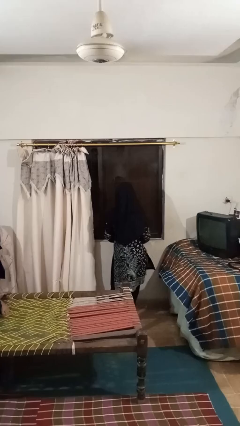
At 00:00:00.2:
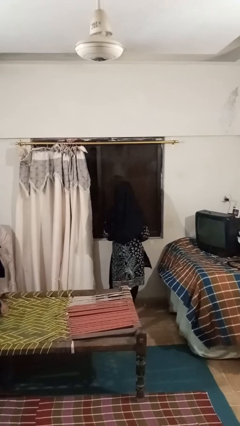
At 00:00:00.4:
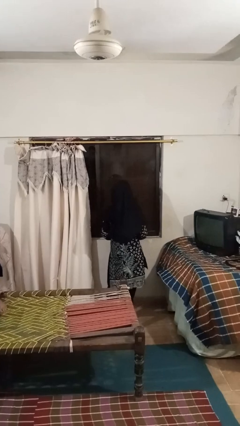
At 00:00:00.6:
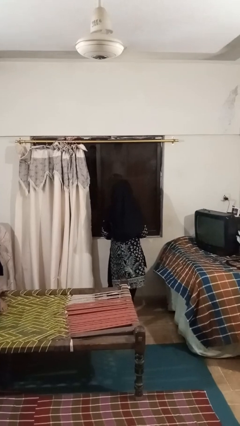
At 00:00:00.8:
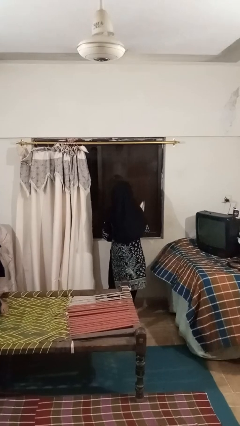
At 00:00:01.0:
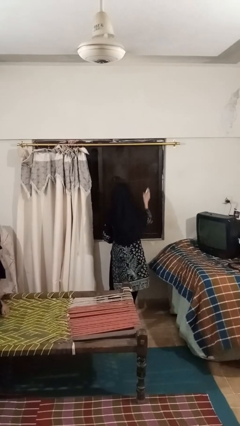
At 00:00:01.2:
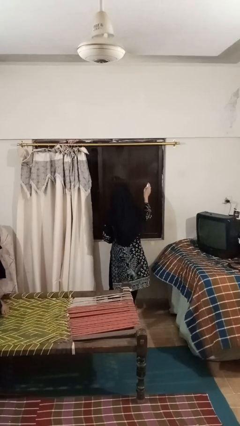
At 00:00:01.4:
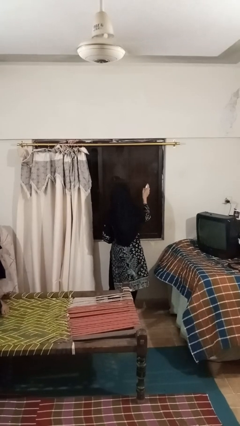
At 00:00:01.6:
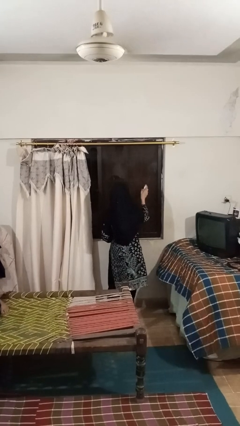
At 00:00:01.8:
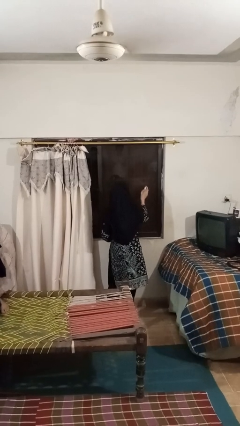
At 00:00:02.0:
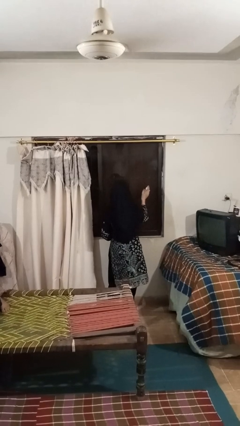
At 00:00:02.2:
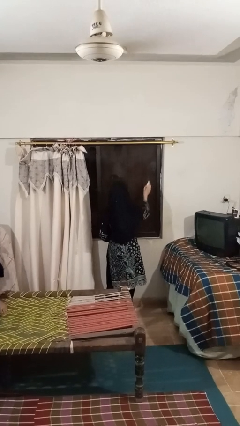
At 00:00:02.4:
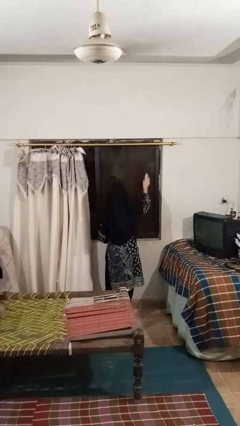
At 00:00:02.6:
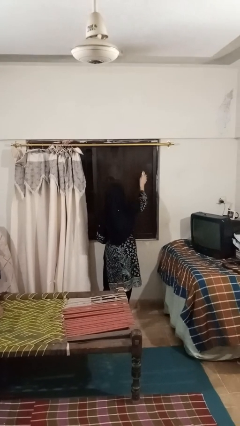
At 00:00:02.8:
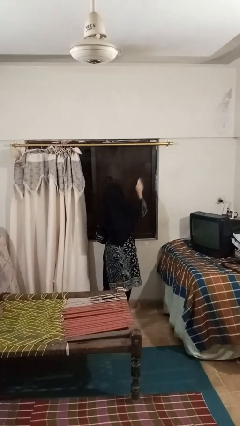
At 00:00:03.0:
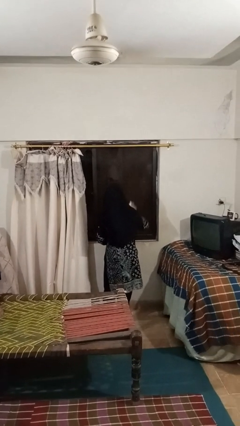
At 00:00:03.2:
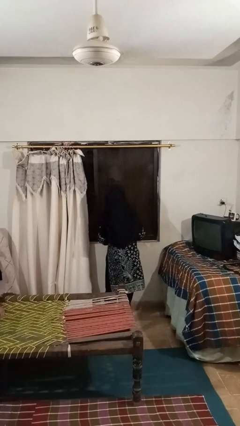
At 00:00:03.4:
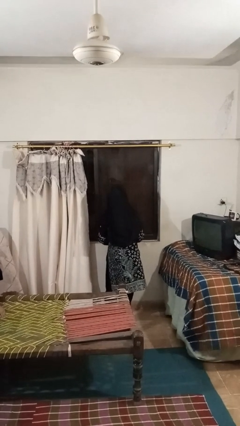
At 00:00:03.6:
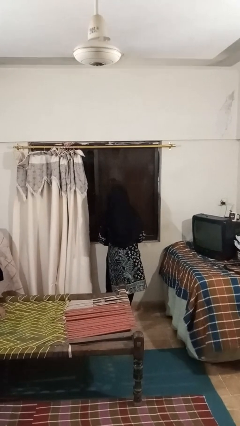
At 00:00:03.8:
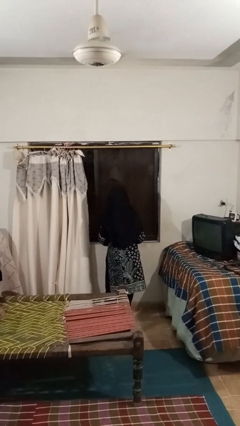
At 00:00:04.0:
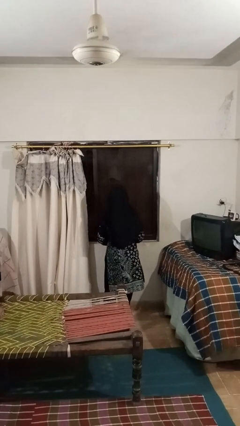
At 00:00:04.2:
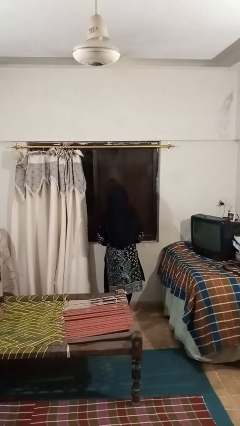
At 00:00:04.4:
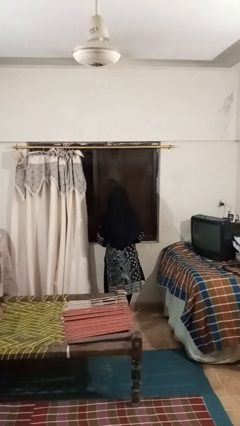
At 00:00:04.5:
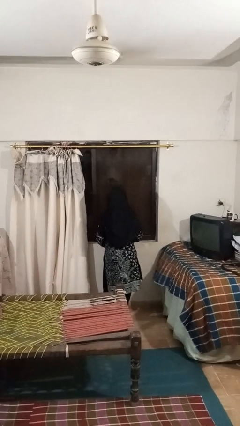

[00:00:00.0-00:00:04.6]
person sprays from bottle

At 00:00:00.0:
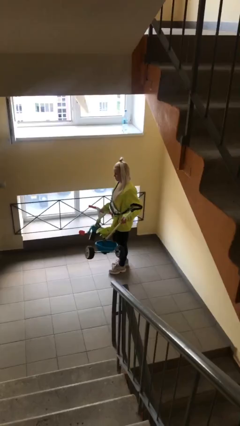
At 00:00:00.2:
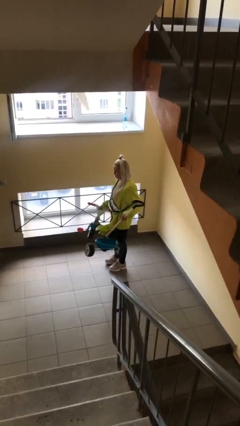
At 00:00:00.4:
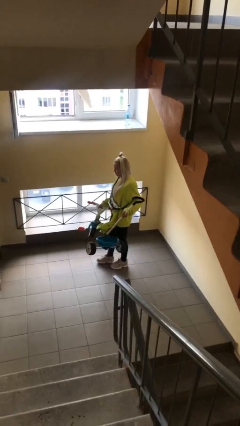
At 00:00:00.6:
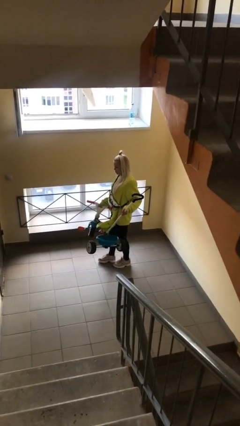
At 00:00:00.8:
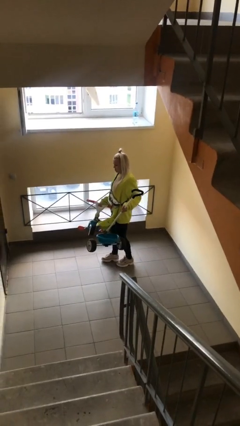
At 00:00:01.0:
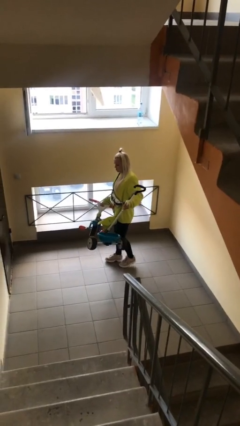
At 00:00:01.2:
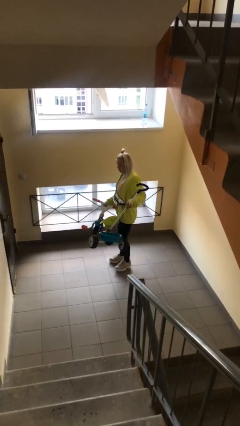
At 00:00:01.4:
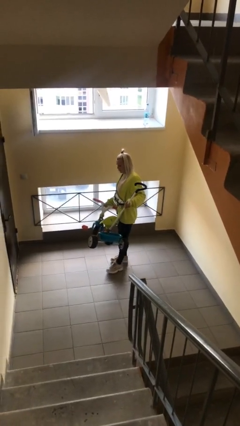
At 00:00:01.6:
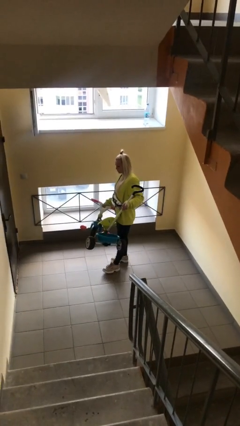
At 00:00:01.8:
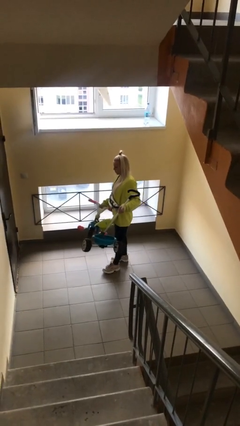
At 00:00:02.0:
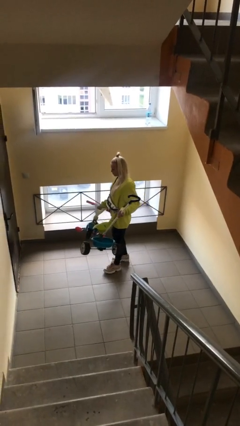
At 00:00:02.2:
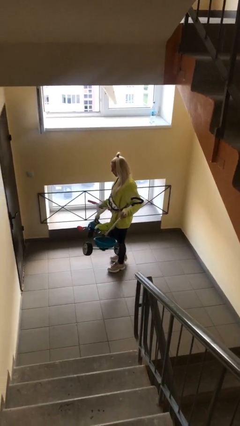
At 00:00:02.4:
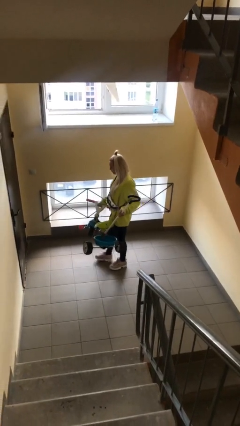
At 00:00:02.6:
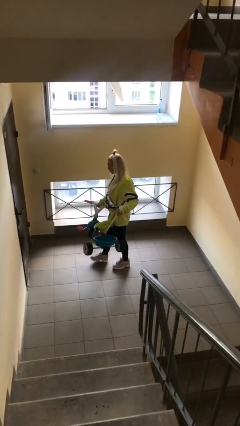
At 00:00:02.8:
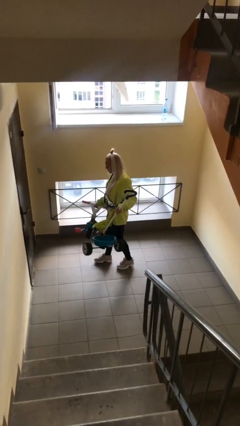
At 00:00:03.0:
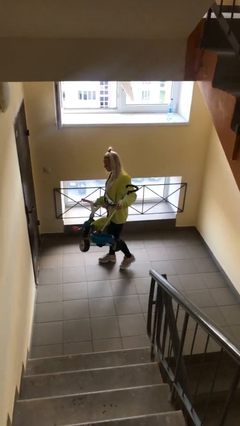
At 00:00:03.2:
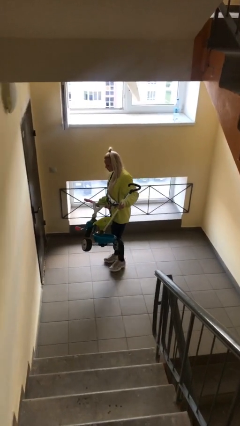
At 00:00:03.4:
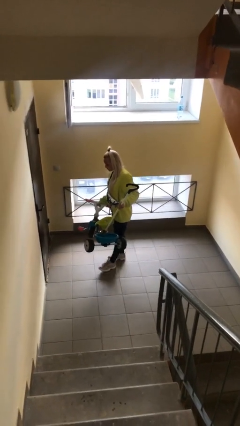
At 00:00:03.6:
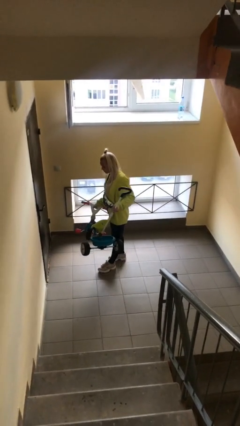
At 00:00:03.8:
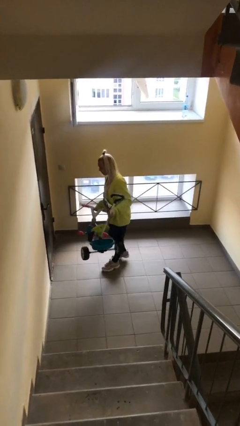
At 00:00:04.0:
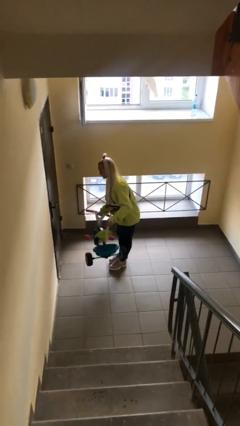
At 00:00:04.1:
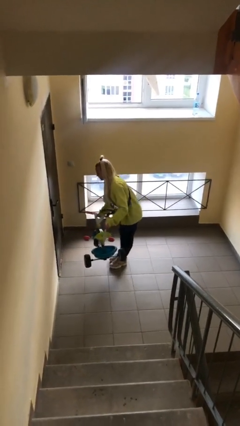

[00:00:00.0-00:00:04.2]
person carries heavy object

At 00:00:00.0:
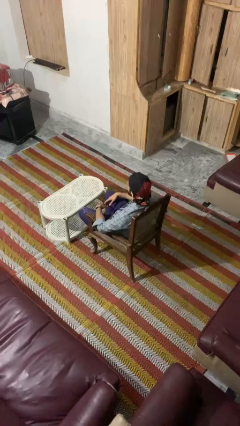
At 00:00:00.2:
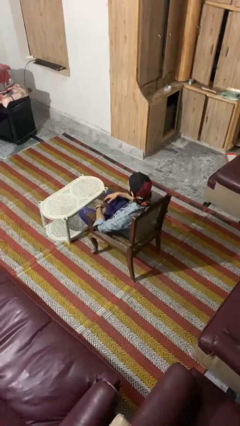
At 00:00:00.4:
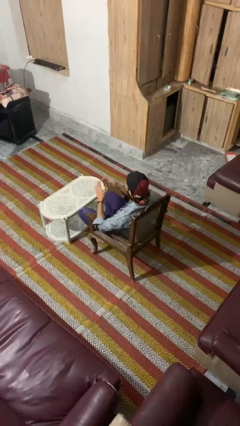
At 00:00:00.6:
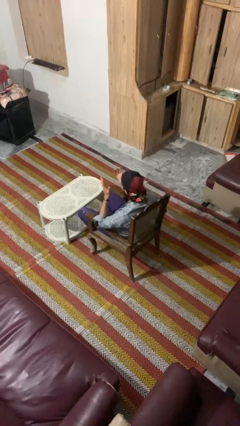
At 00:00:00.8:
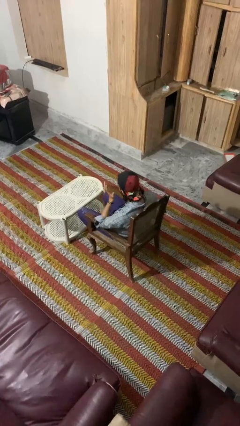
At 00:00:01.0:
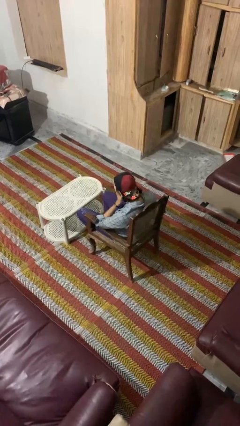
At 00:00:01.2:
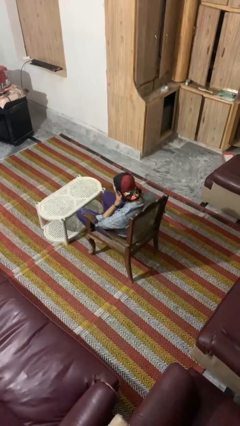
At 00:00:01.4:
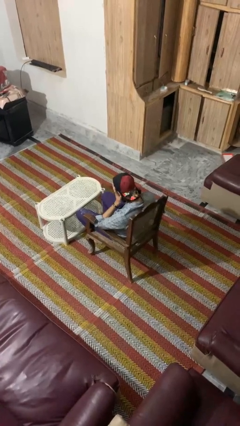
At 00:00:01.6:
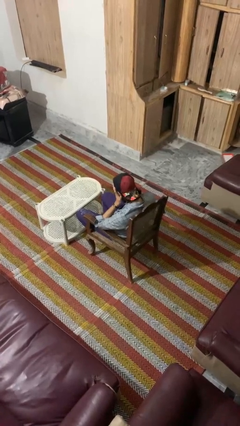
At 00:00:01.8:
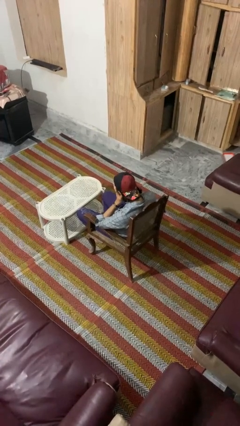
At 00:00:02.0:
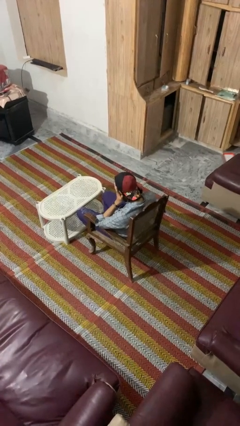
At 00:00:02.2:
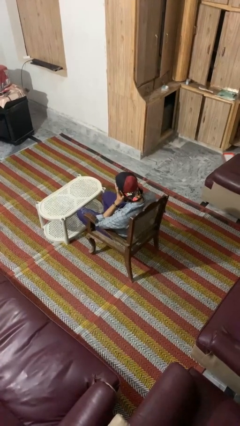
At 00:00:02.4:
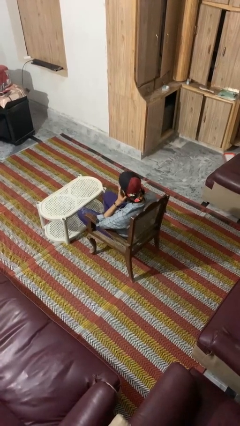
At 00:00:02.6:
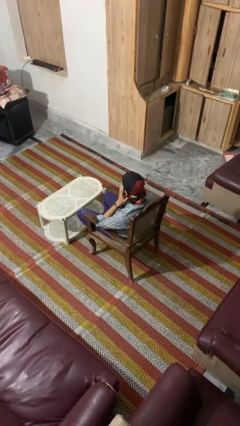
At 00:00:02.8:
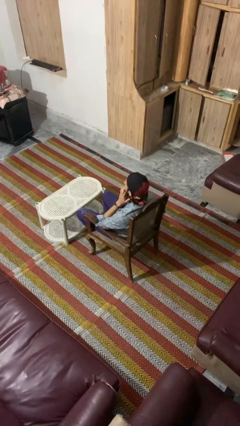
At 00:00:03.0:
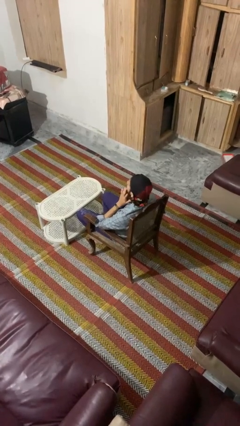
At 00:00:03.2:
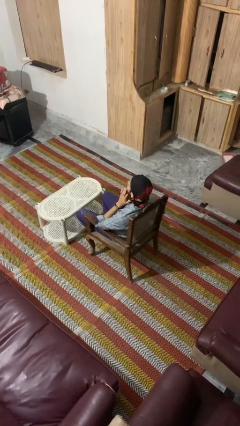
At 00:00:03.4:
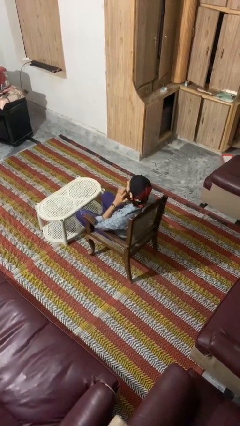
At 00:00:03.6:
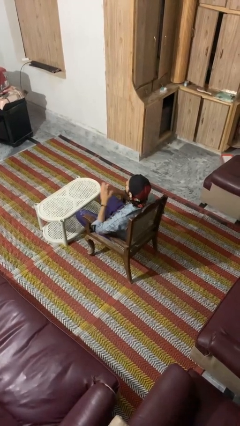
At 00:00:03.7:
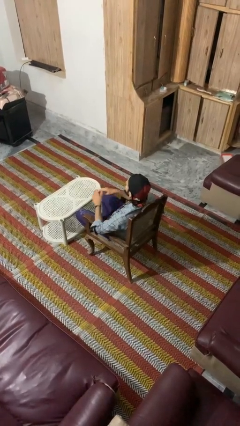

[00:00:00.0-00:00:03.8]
person covers face with hands

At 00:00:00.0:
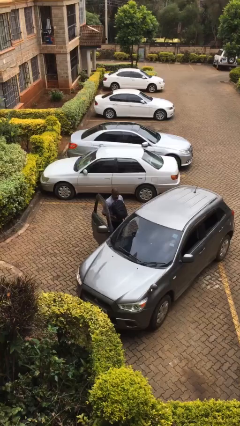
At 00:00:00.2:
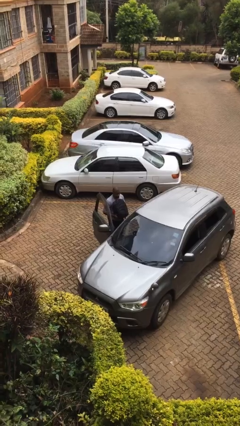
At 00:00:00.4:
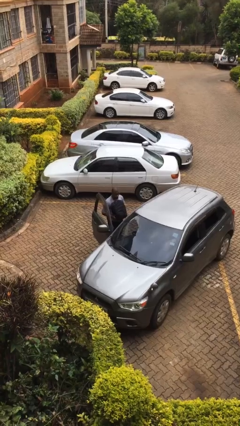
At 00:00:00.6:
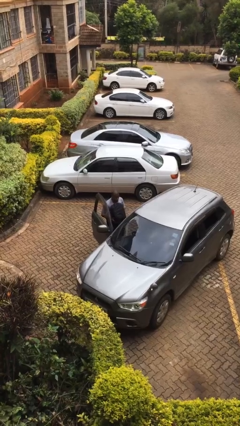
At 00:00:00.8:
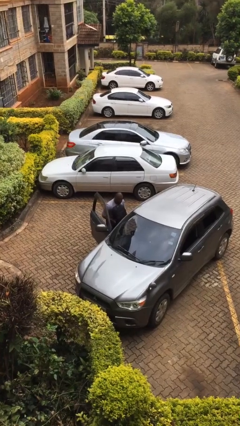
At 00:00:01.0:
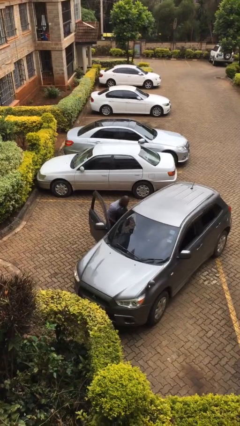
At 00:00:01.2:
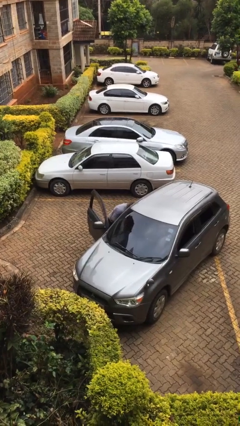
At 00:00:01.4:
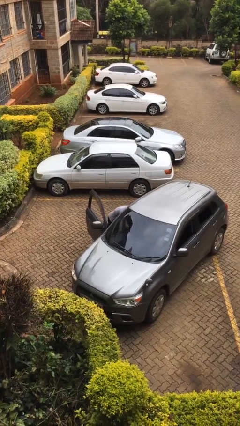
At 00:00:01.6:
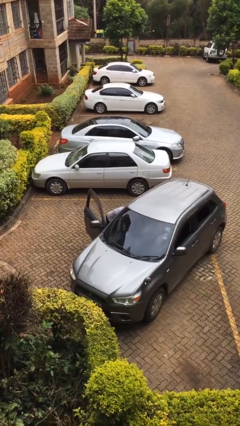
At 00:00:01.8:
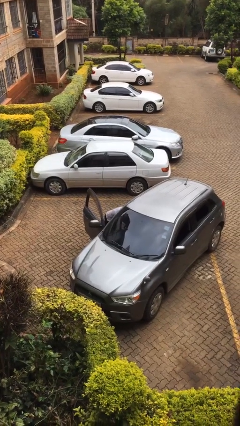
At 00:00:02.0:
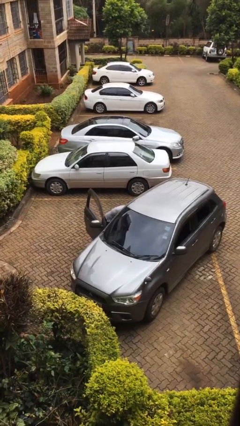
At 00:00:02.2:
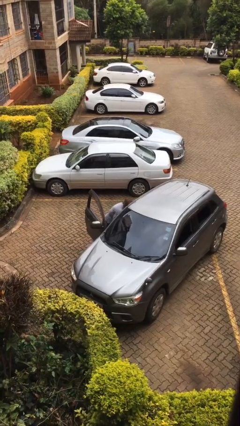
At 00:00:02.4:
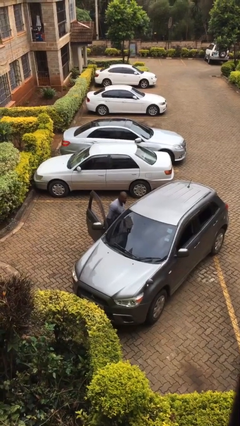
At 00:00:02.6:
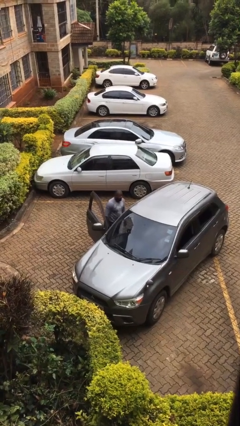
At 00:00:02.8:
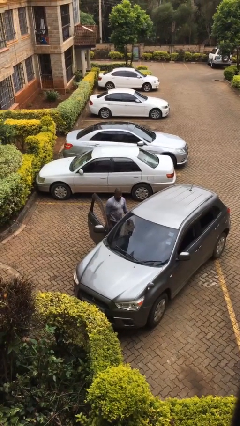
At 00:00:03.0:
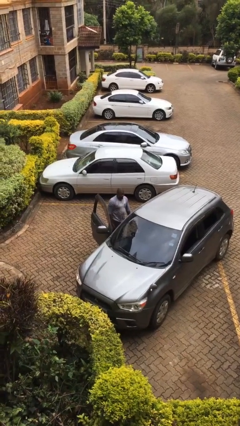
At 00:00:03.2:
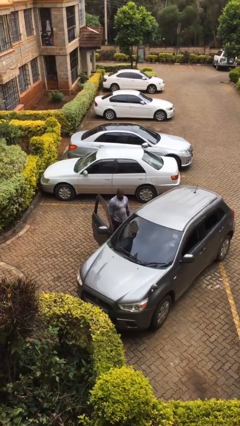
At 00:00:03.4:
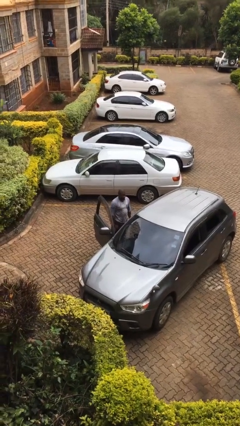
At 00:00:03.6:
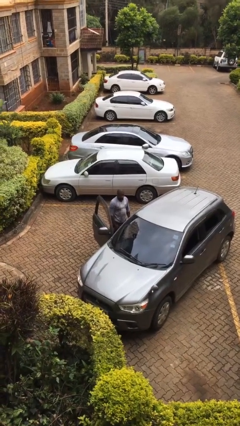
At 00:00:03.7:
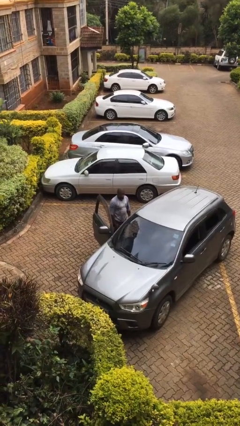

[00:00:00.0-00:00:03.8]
person loads car

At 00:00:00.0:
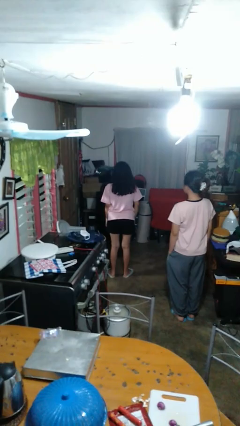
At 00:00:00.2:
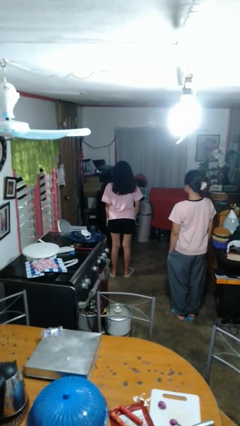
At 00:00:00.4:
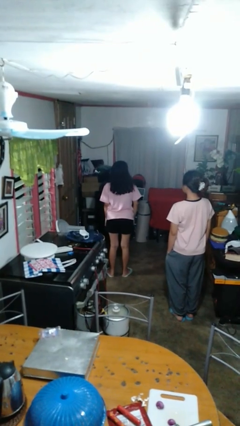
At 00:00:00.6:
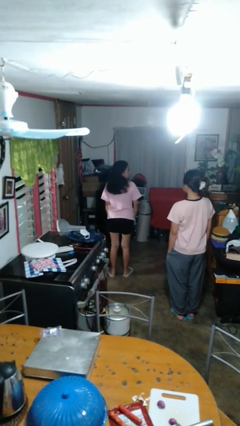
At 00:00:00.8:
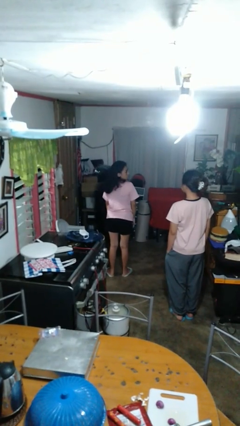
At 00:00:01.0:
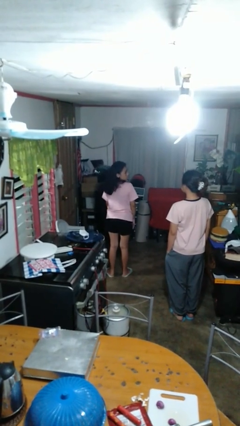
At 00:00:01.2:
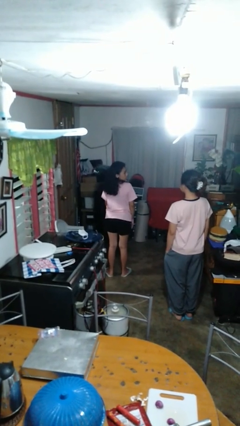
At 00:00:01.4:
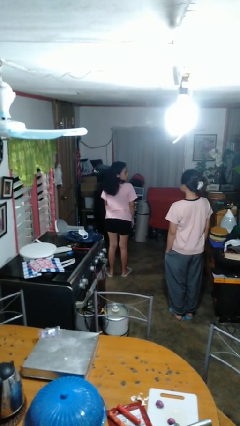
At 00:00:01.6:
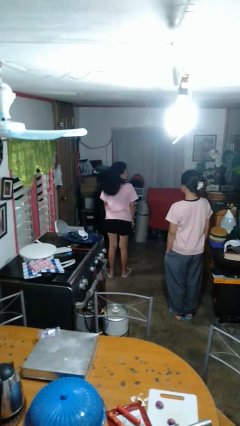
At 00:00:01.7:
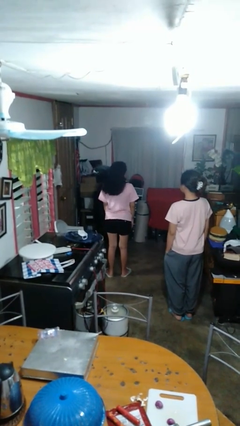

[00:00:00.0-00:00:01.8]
person looks over shoulder
